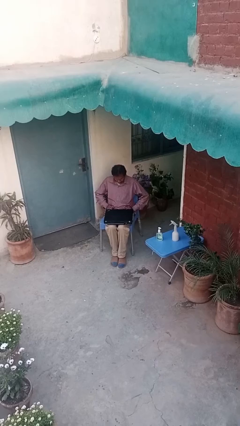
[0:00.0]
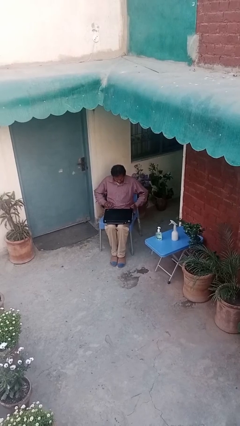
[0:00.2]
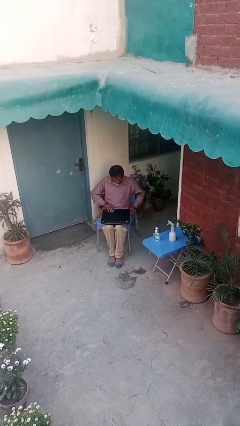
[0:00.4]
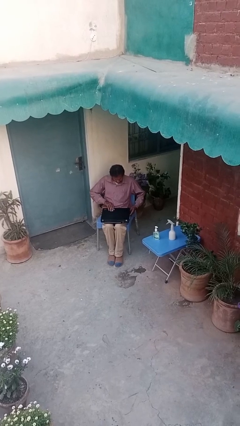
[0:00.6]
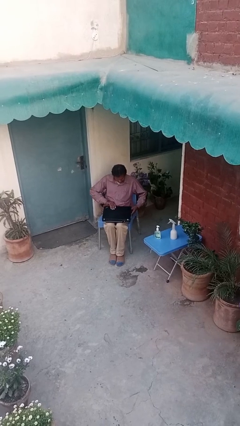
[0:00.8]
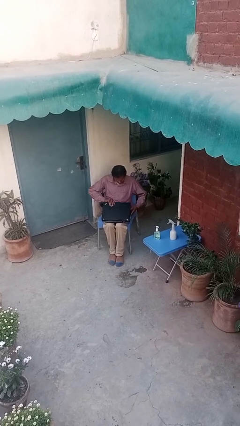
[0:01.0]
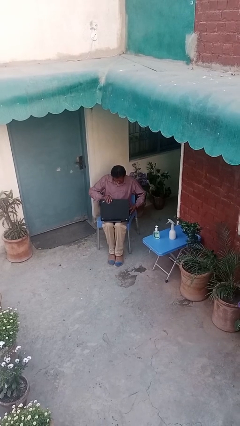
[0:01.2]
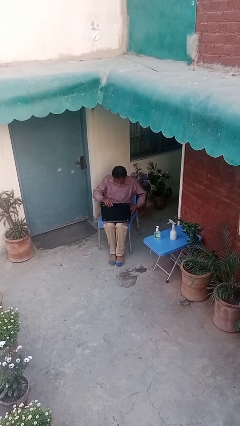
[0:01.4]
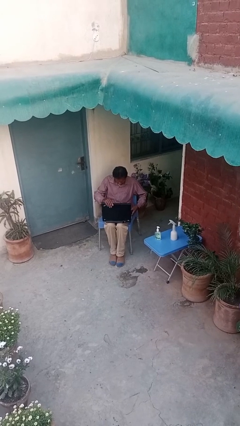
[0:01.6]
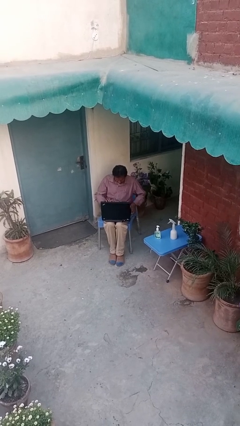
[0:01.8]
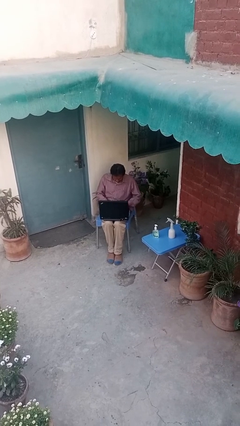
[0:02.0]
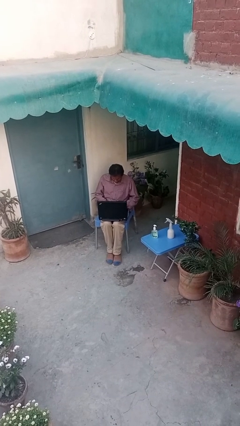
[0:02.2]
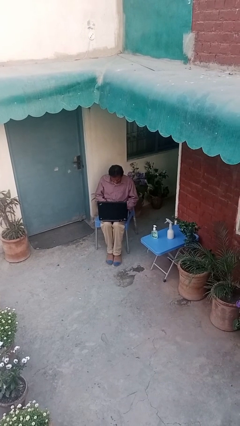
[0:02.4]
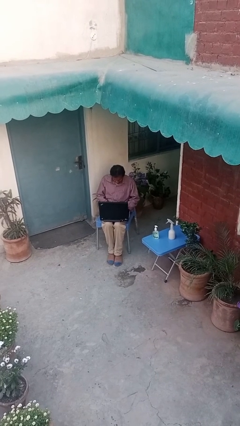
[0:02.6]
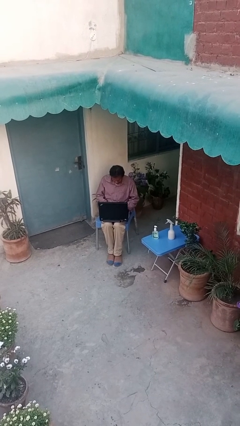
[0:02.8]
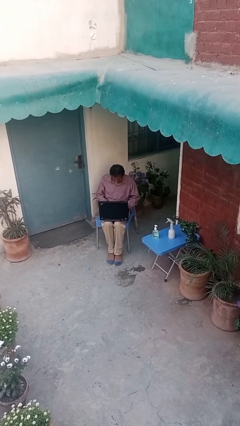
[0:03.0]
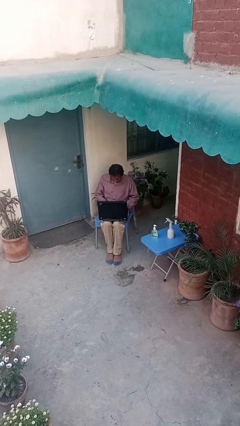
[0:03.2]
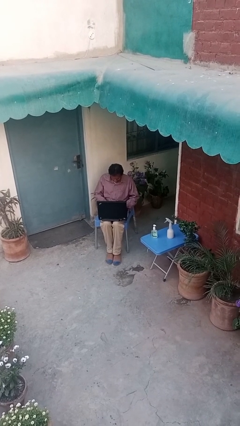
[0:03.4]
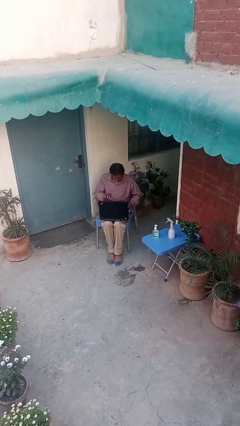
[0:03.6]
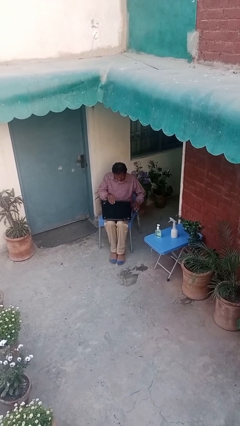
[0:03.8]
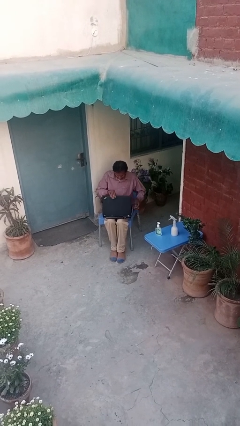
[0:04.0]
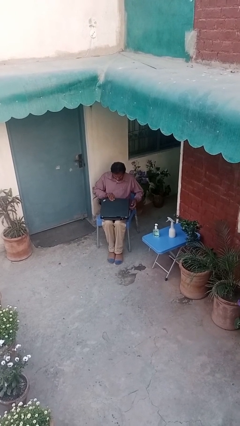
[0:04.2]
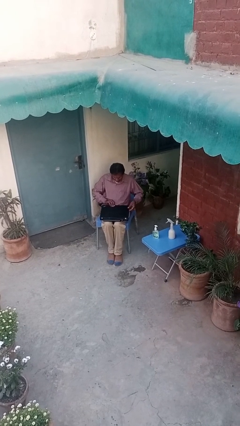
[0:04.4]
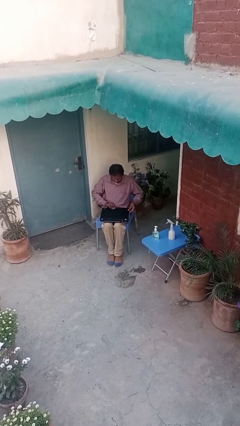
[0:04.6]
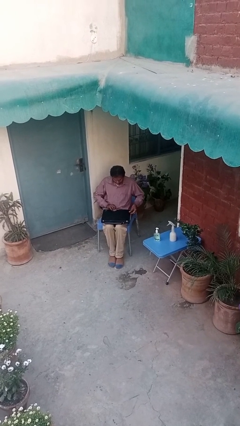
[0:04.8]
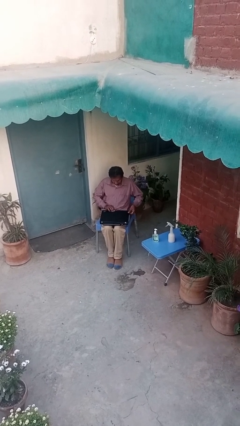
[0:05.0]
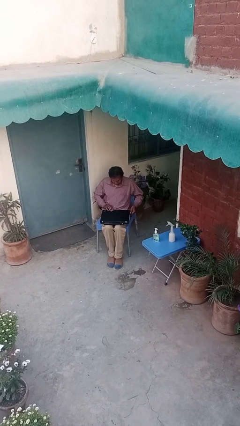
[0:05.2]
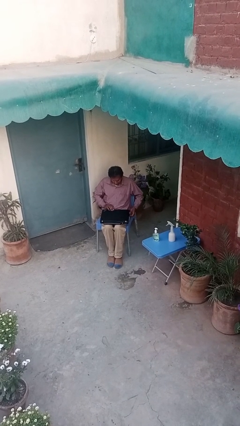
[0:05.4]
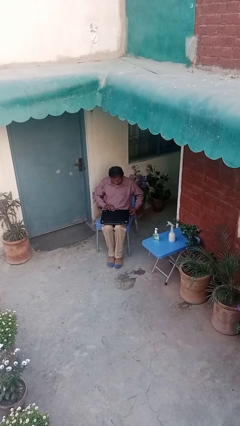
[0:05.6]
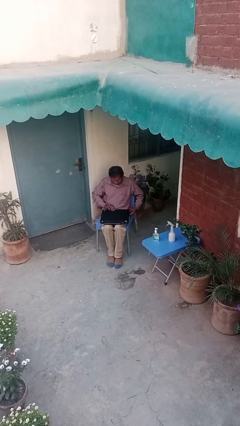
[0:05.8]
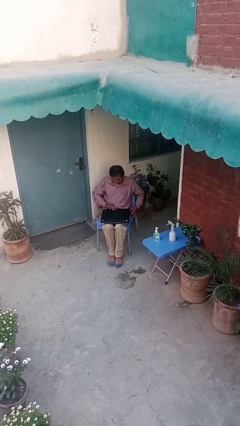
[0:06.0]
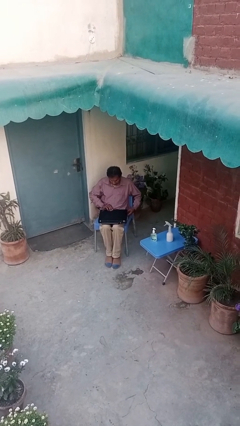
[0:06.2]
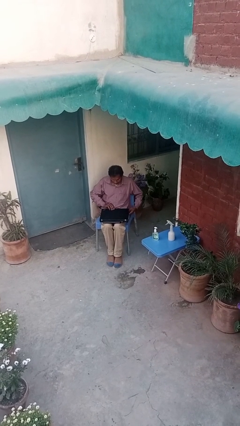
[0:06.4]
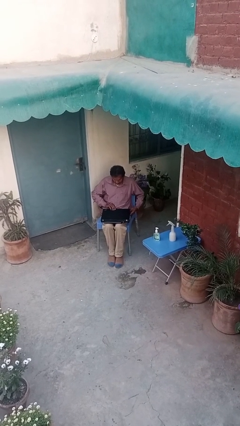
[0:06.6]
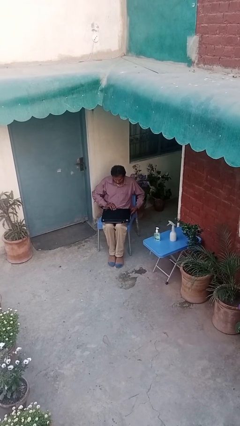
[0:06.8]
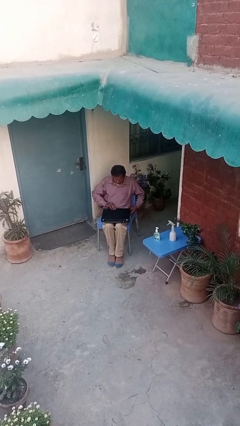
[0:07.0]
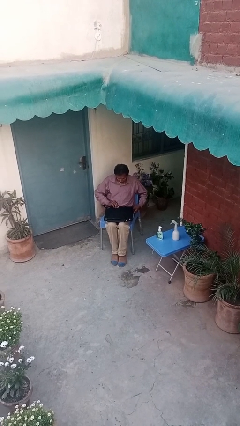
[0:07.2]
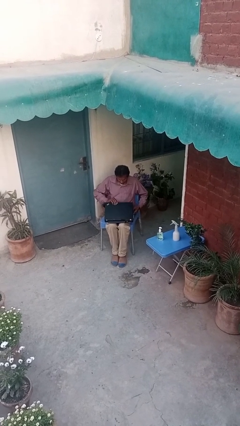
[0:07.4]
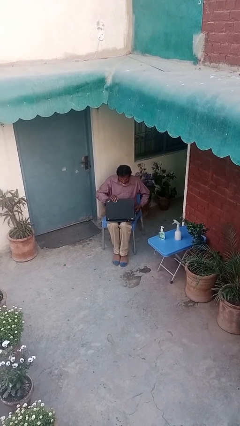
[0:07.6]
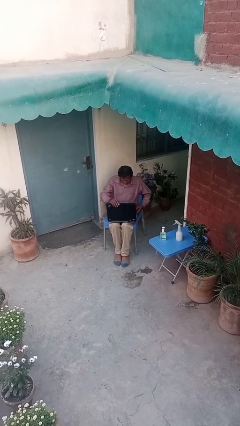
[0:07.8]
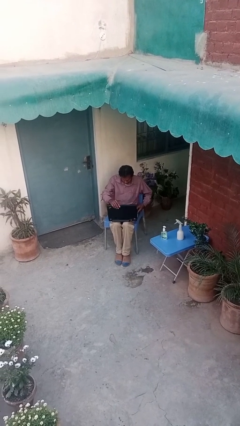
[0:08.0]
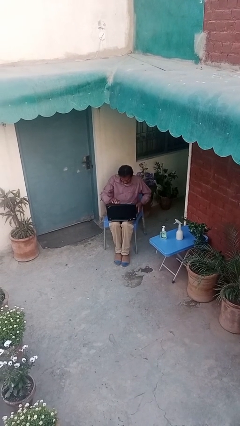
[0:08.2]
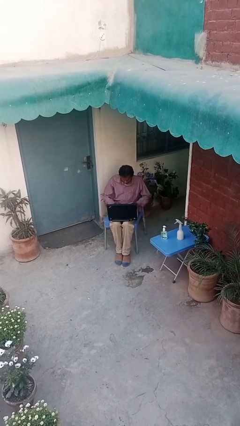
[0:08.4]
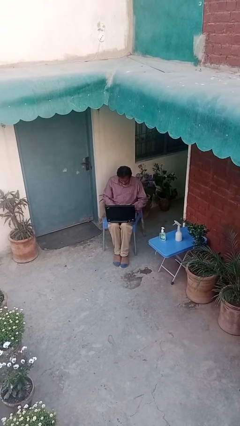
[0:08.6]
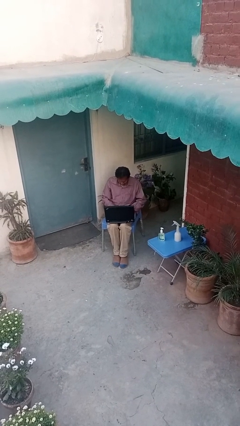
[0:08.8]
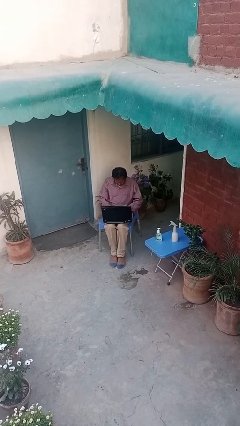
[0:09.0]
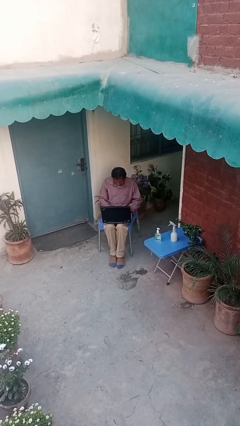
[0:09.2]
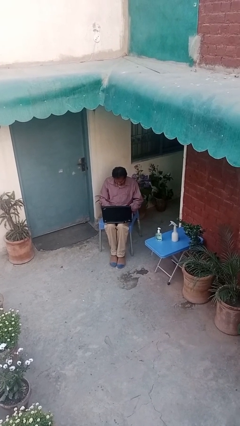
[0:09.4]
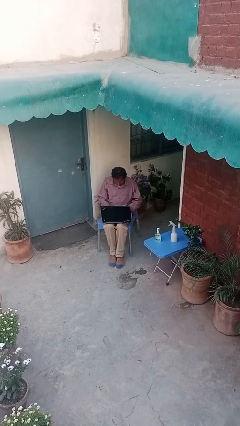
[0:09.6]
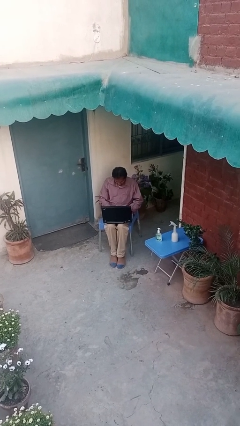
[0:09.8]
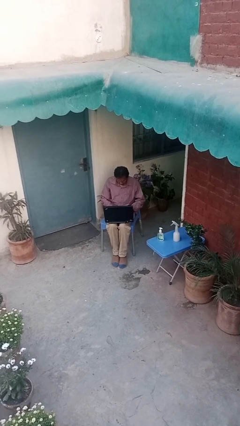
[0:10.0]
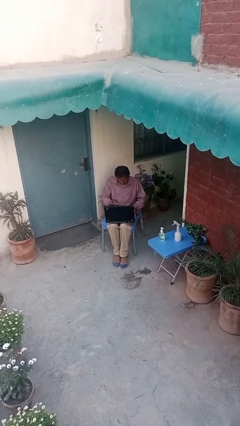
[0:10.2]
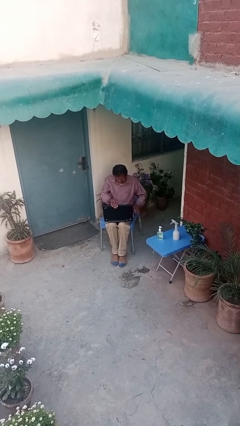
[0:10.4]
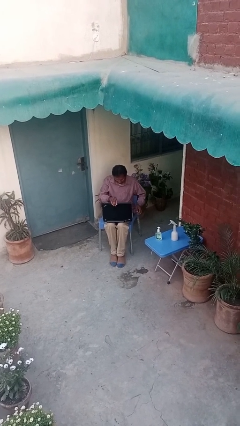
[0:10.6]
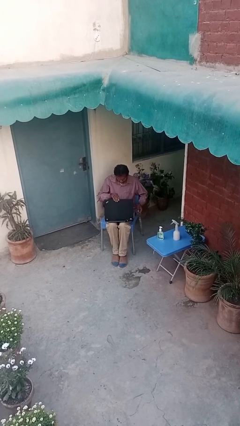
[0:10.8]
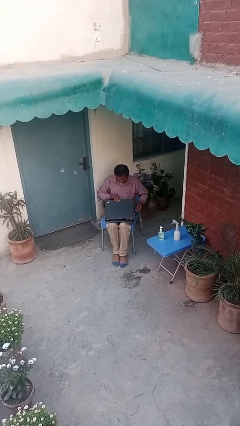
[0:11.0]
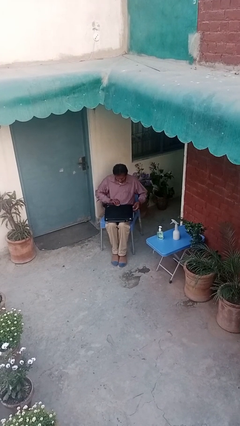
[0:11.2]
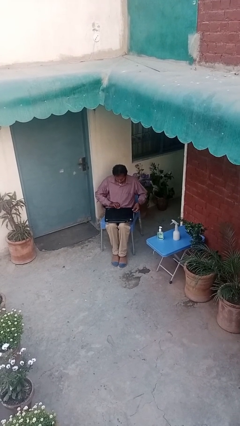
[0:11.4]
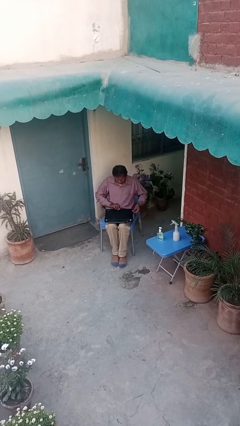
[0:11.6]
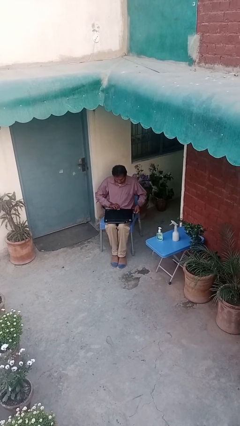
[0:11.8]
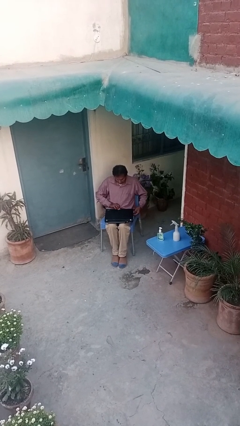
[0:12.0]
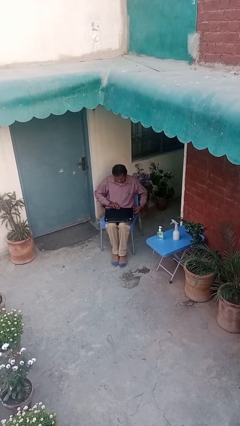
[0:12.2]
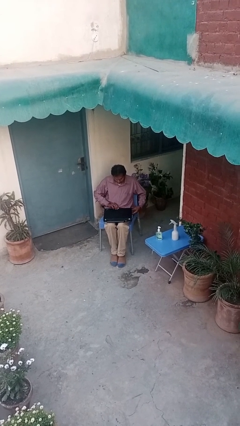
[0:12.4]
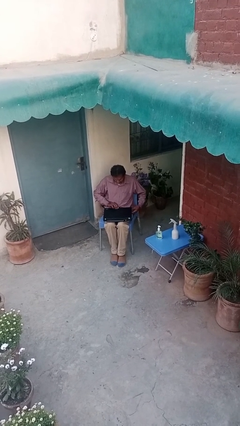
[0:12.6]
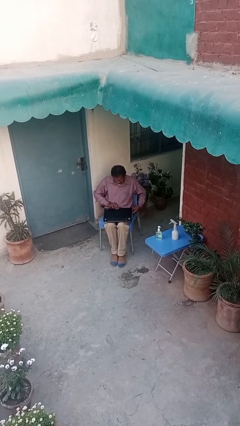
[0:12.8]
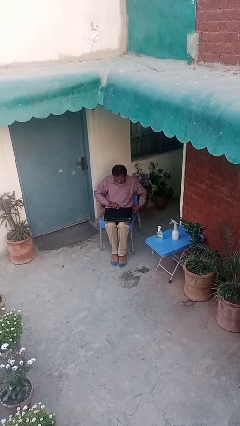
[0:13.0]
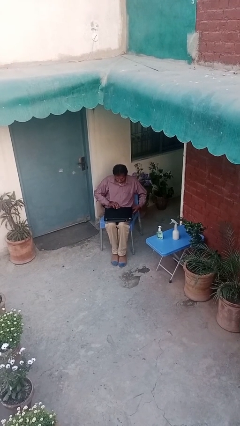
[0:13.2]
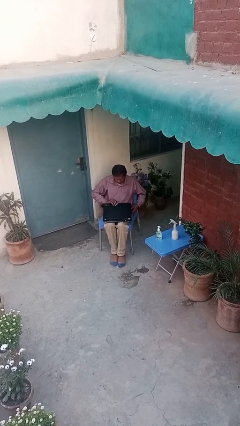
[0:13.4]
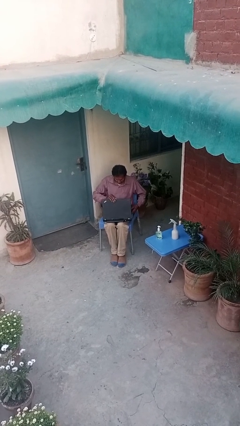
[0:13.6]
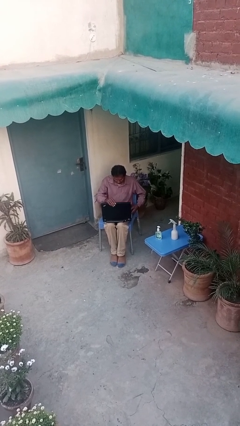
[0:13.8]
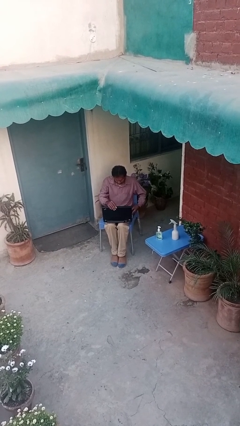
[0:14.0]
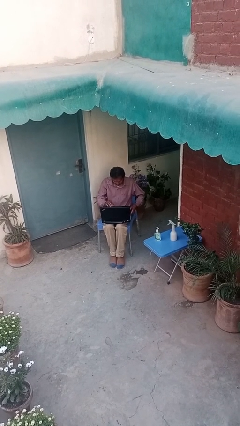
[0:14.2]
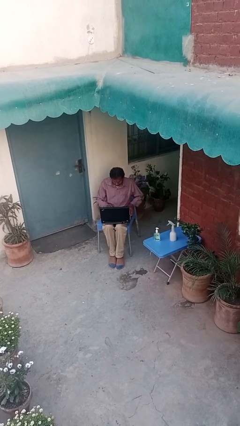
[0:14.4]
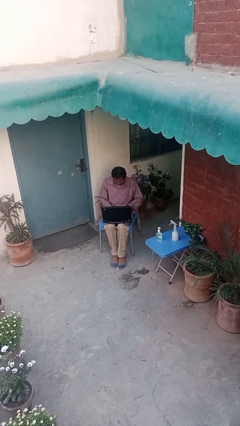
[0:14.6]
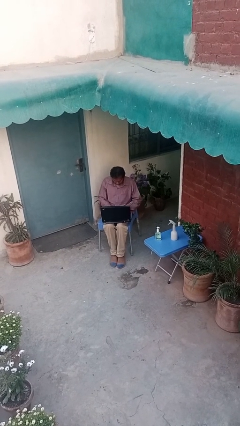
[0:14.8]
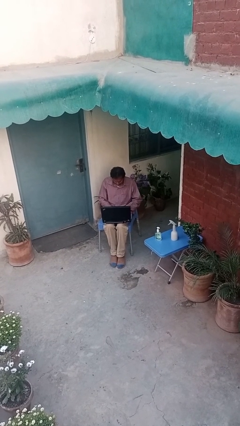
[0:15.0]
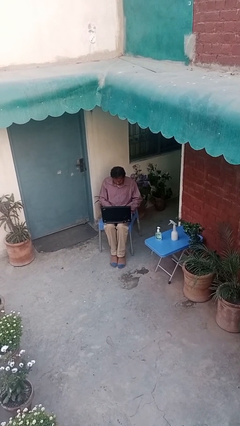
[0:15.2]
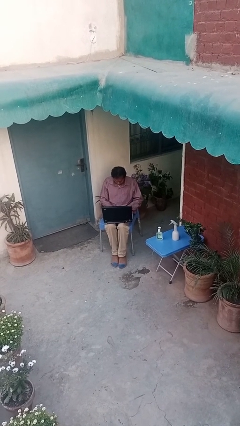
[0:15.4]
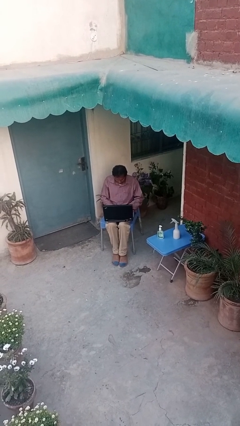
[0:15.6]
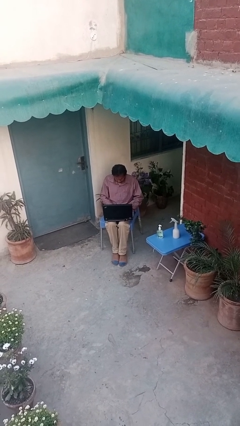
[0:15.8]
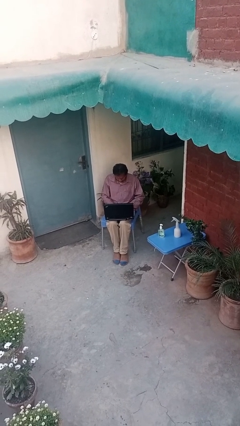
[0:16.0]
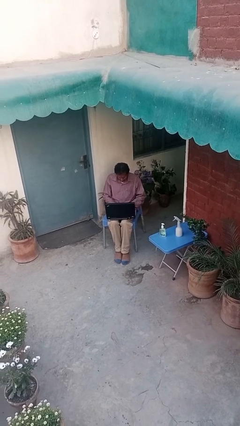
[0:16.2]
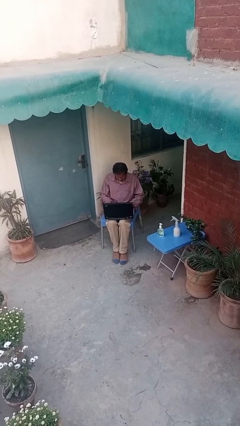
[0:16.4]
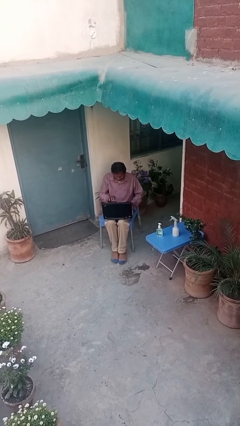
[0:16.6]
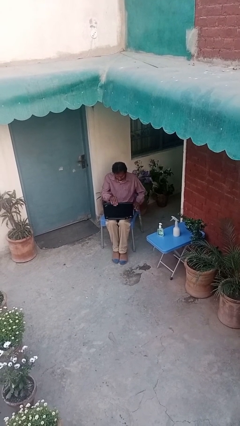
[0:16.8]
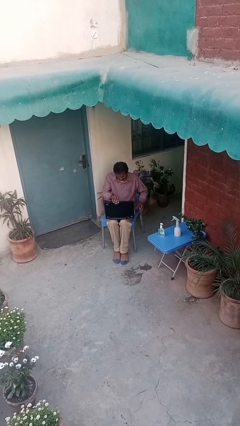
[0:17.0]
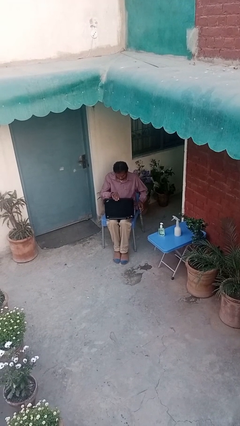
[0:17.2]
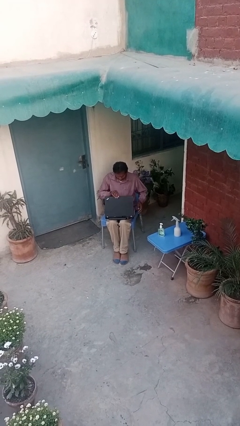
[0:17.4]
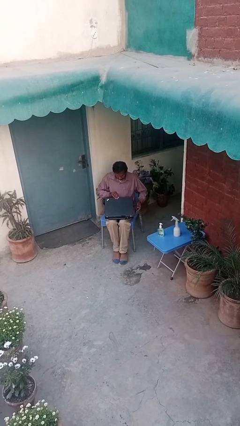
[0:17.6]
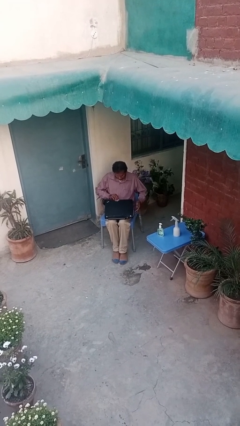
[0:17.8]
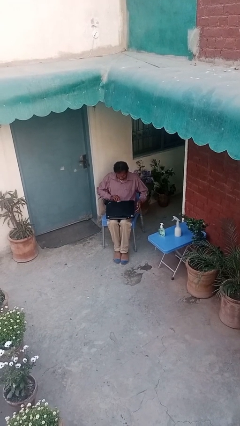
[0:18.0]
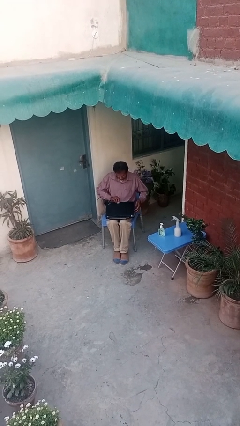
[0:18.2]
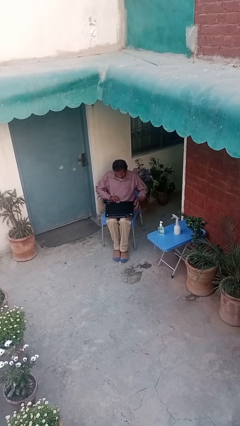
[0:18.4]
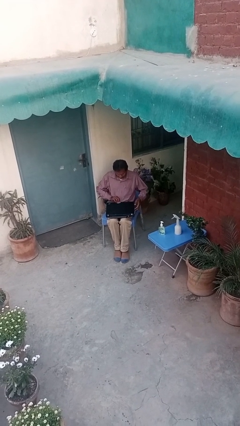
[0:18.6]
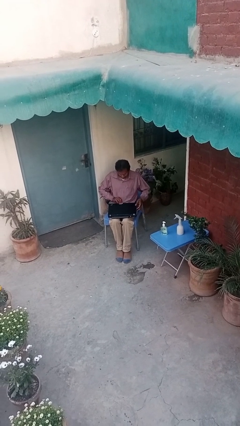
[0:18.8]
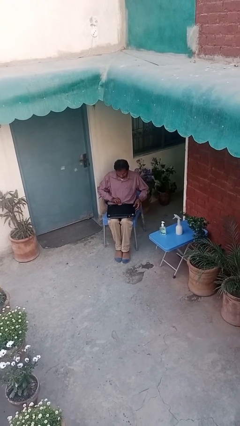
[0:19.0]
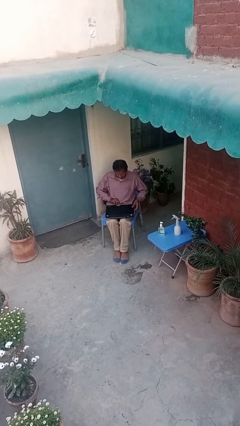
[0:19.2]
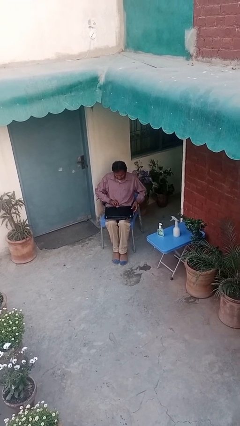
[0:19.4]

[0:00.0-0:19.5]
person interacts with laptop
